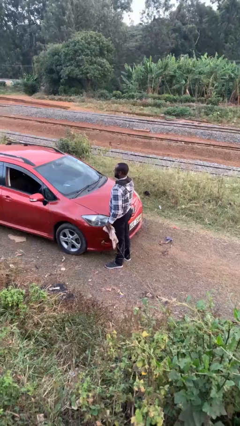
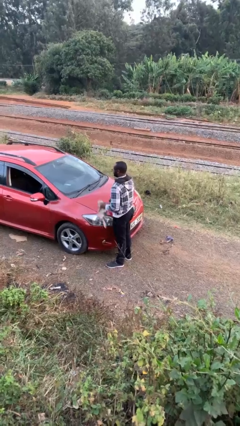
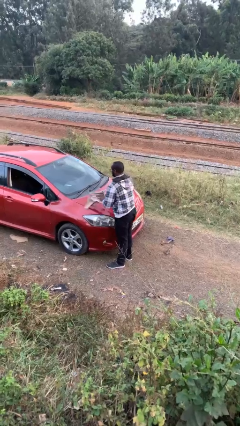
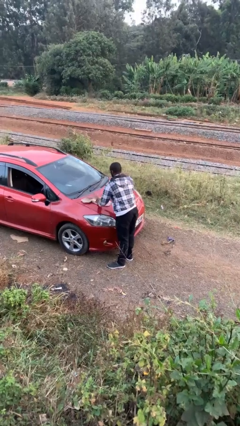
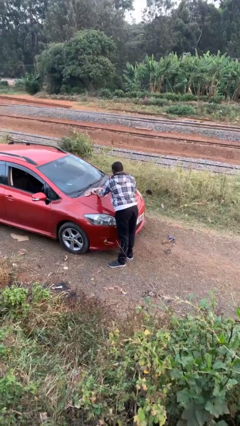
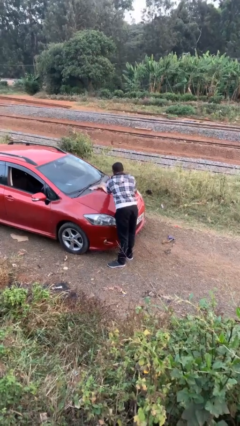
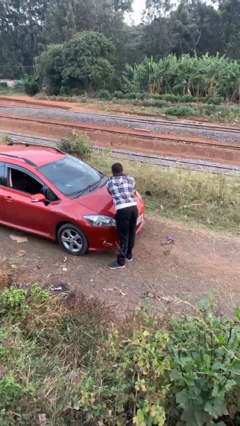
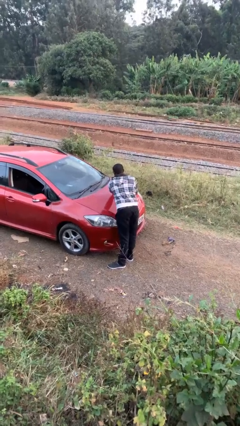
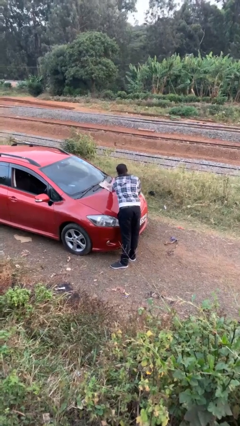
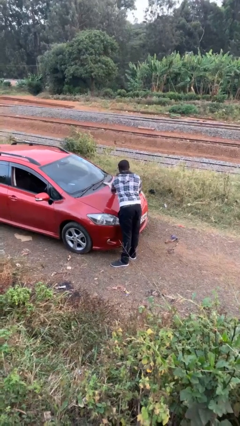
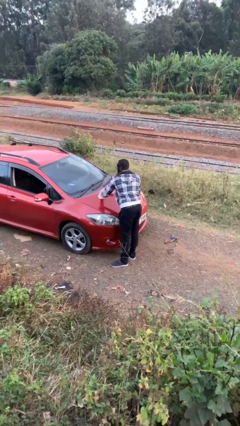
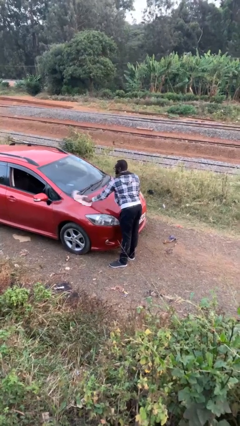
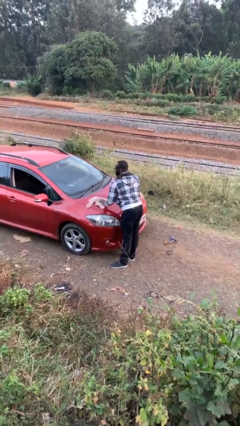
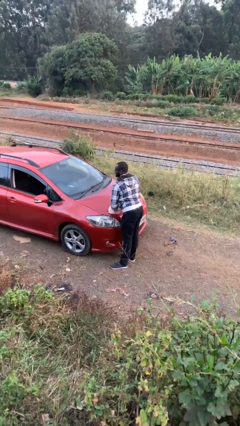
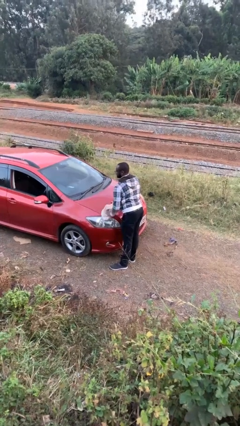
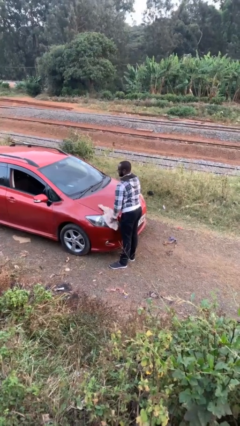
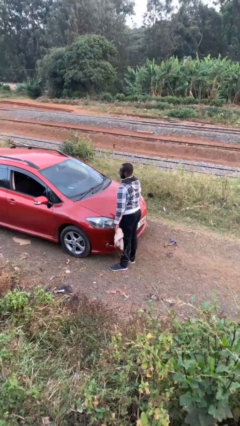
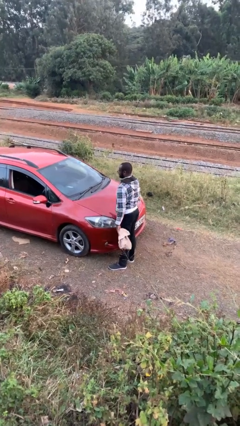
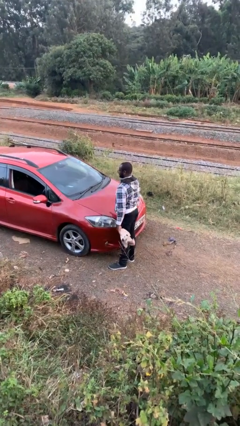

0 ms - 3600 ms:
person polishes car with rag

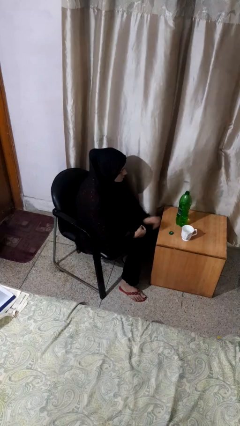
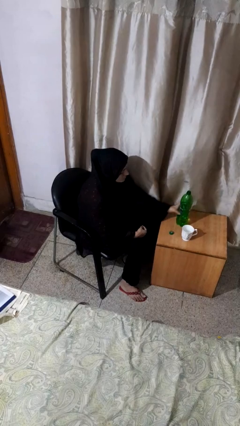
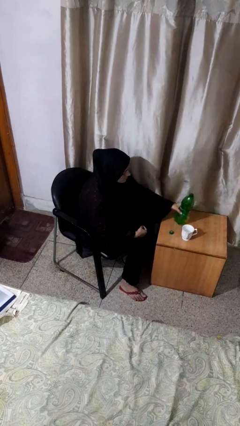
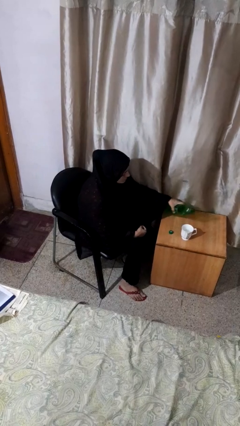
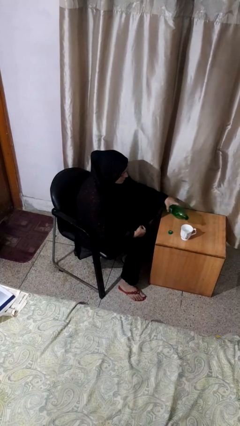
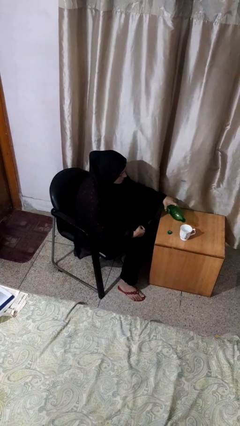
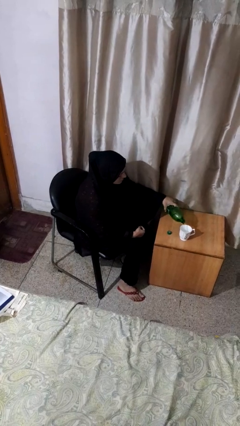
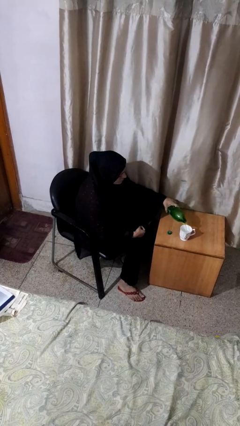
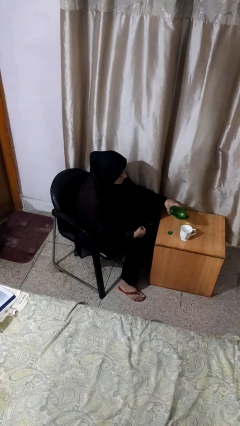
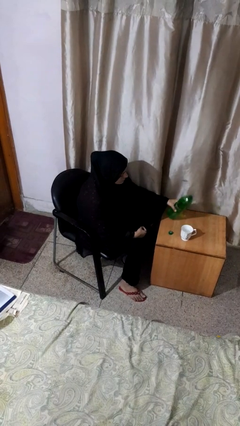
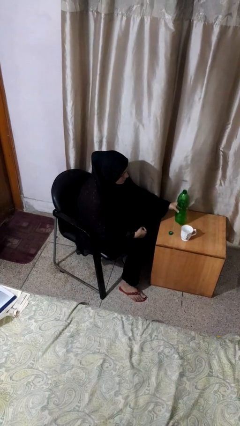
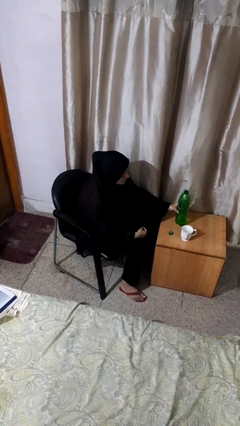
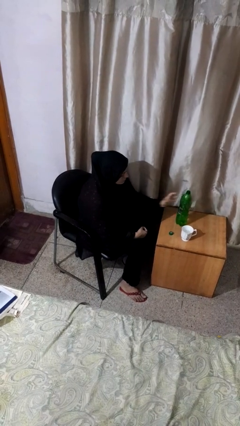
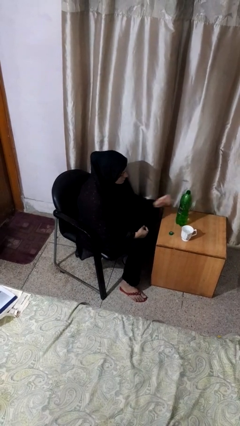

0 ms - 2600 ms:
person pours liquid into cup

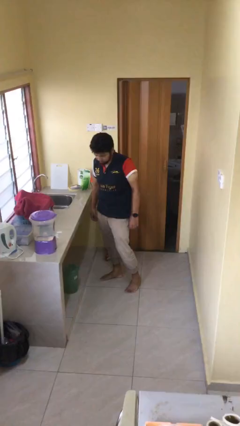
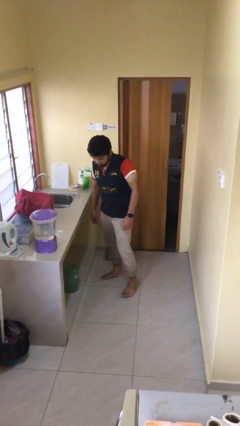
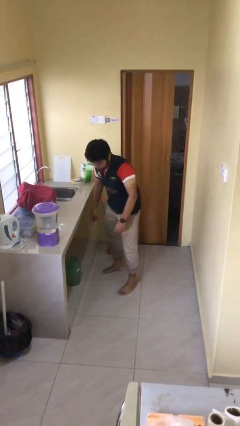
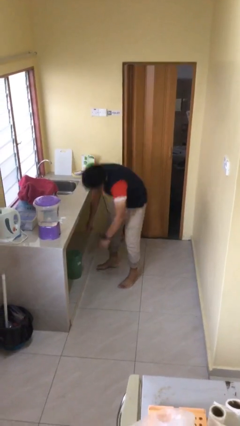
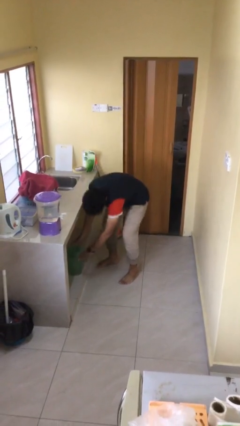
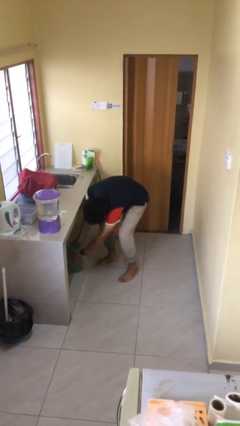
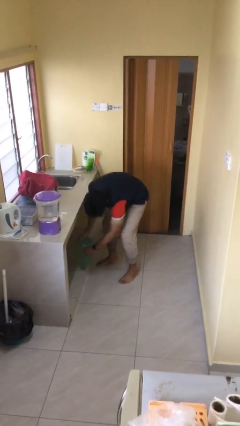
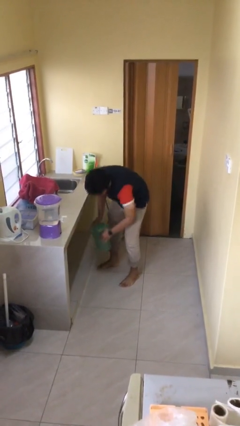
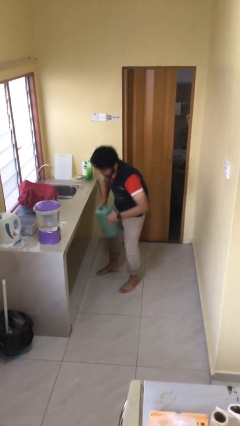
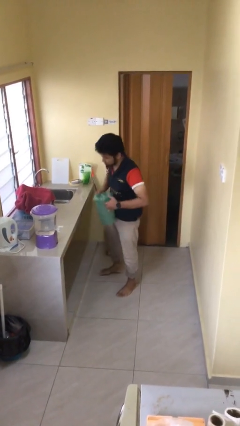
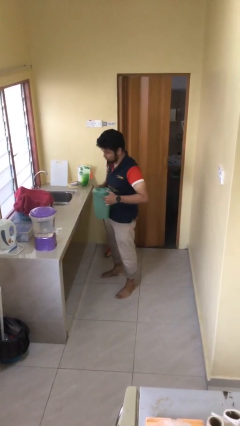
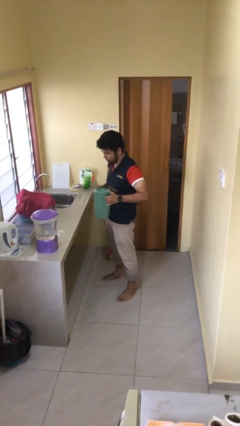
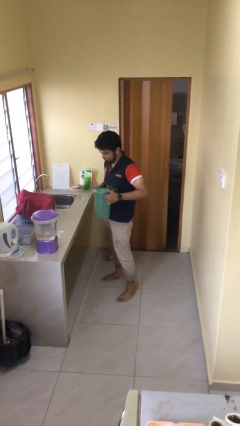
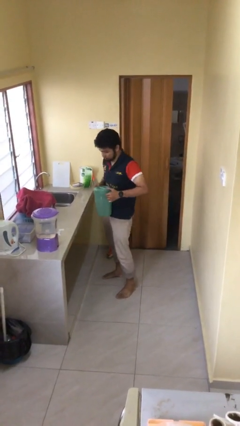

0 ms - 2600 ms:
person picks up object from cabinet

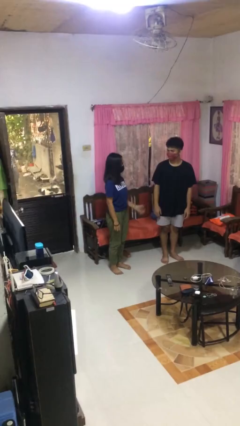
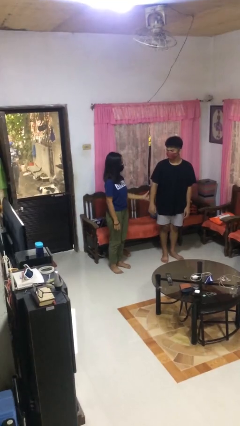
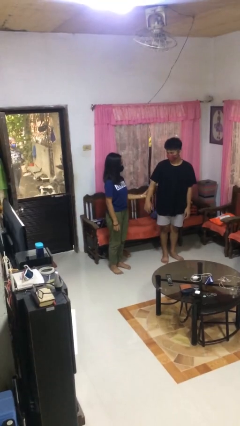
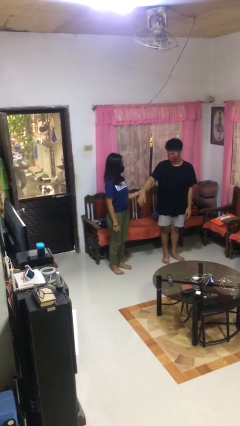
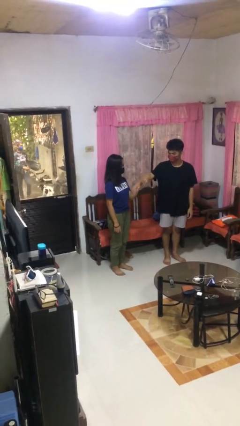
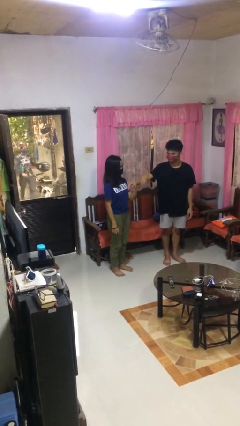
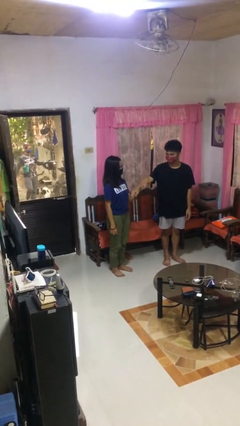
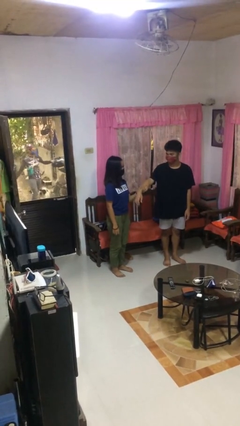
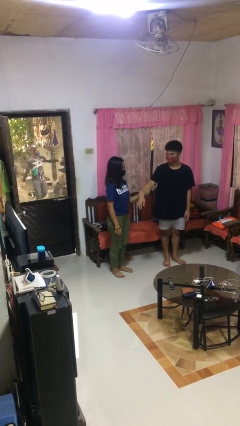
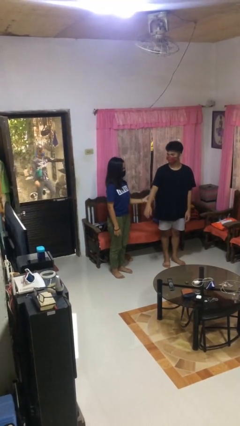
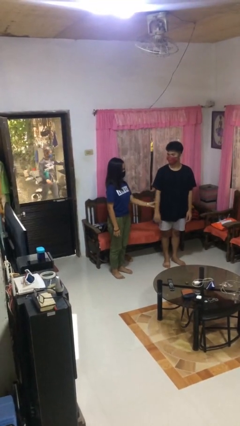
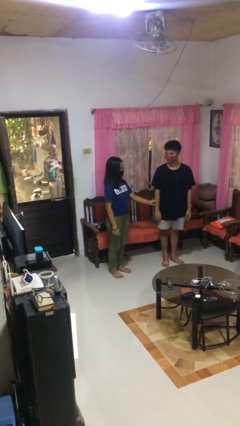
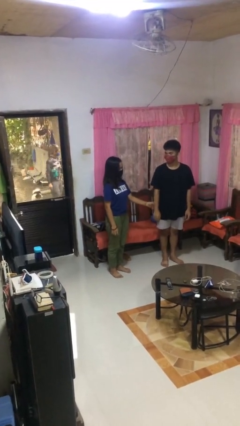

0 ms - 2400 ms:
person grabs person by forearm

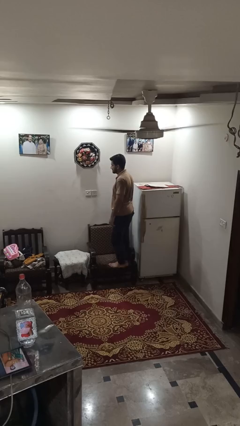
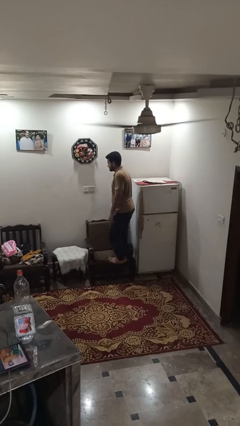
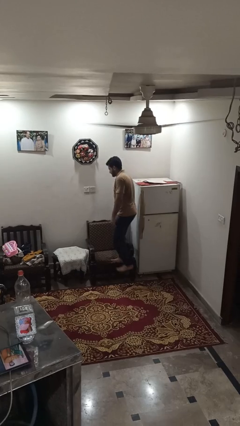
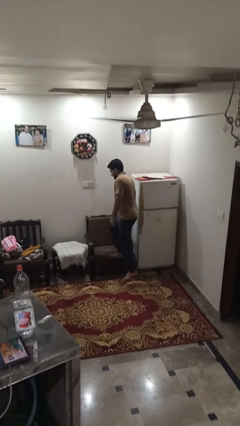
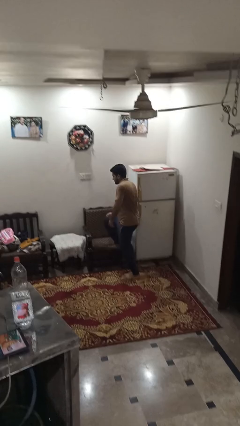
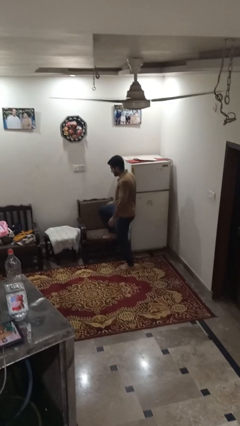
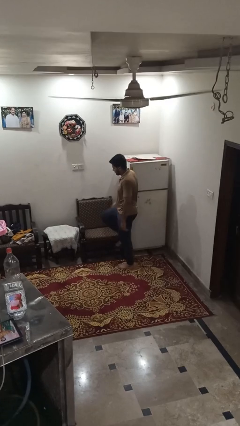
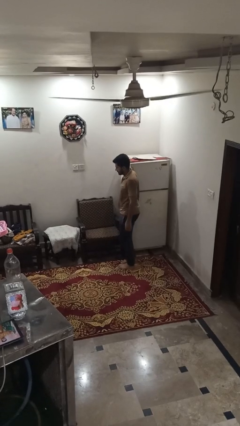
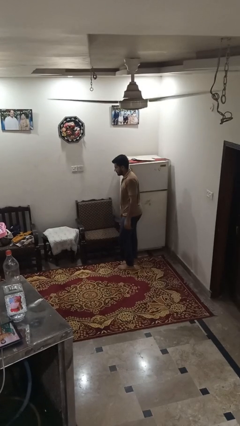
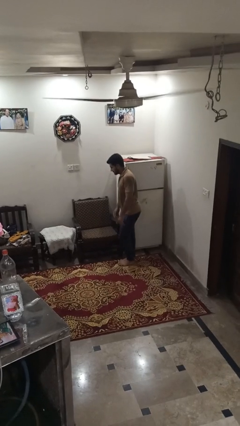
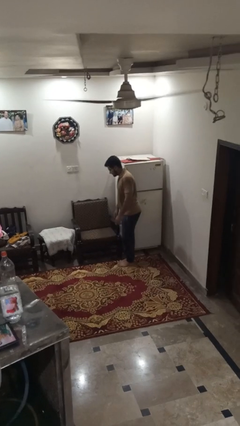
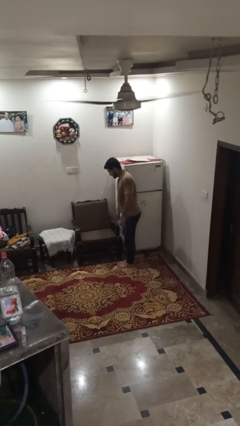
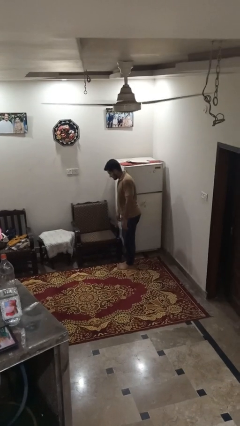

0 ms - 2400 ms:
person climbs off couch

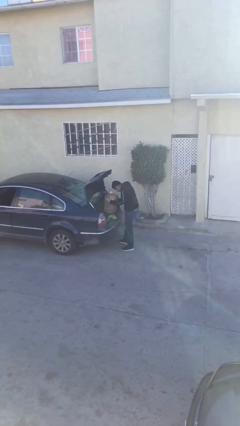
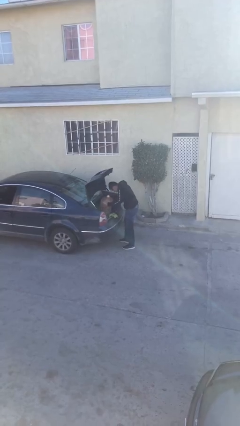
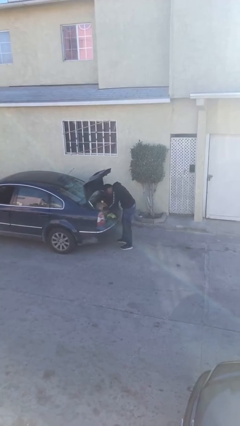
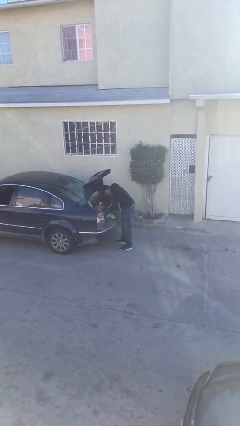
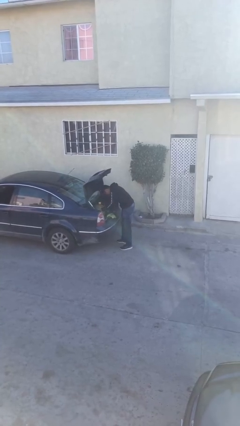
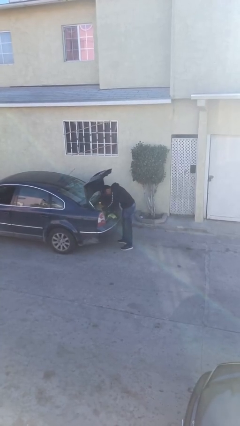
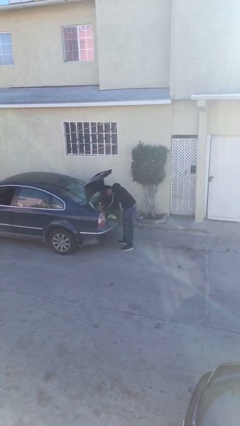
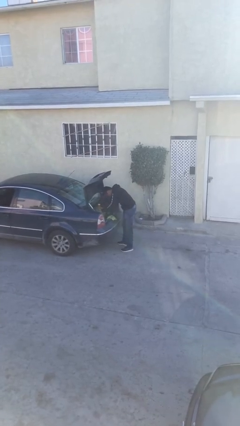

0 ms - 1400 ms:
person loads car

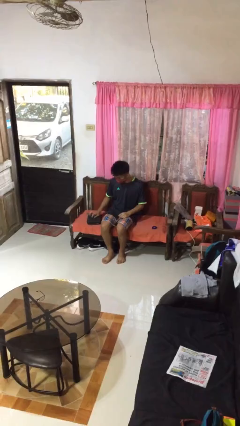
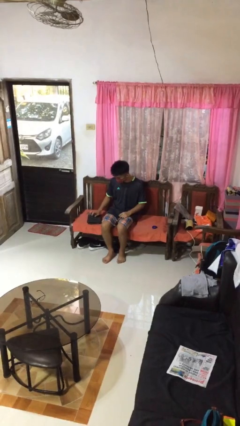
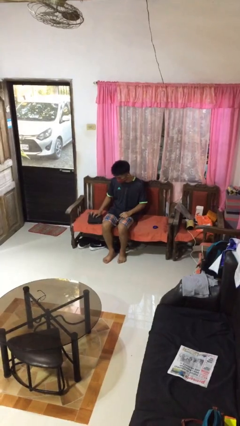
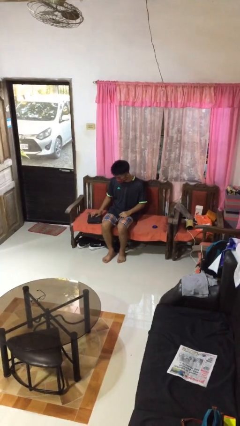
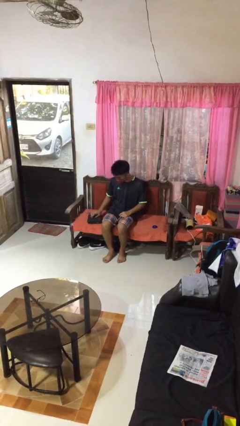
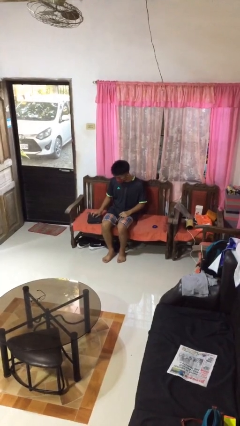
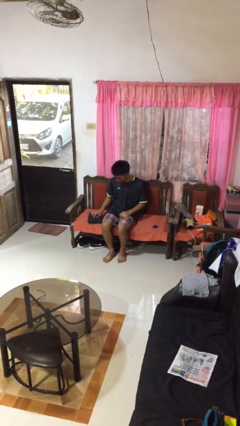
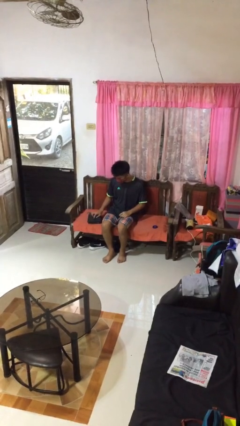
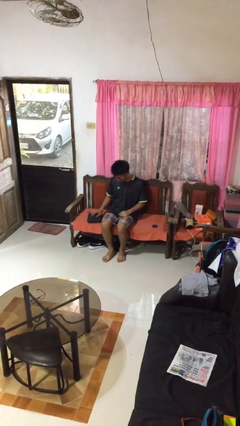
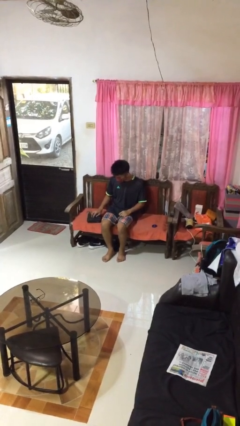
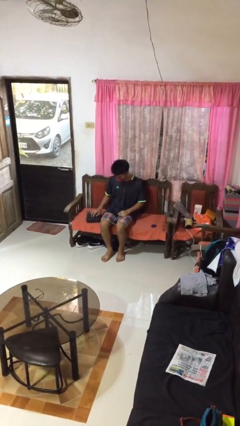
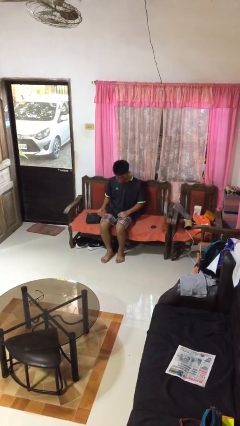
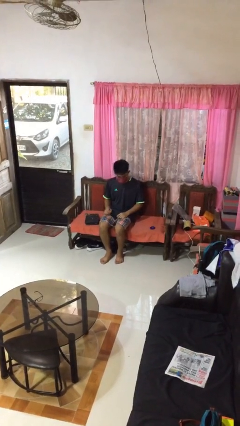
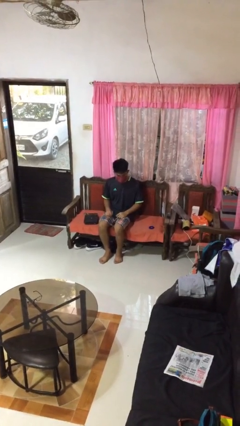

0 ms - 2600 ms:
person taps object with finger
